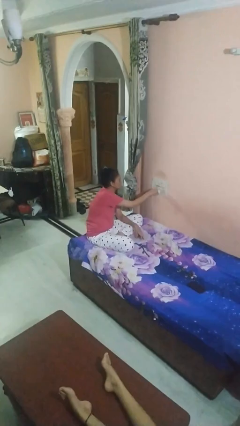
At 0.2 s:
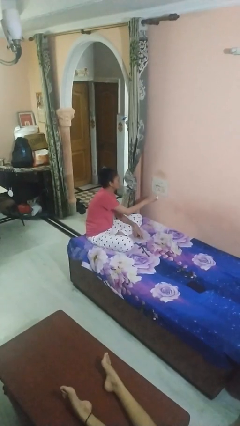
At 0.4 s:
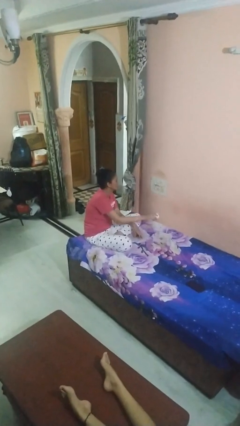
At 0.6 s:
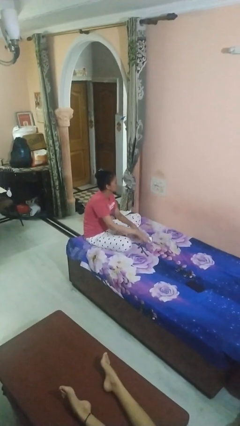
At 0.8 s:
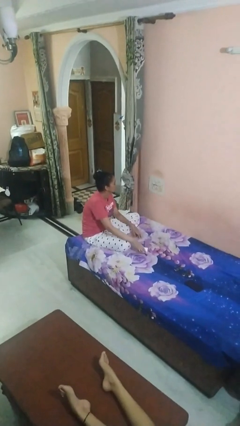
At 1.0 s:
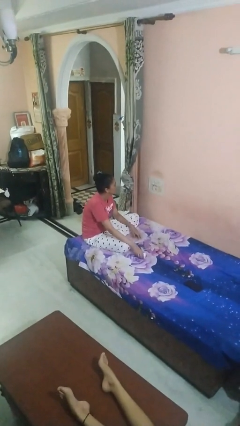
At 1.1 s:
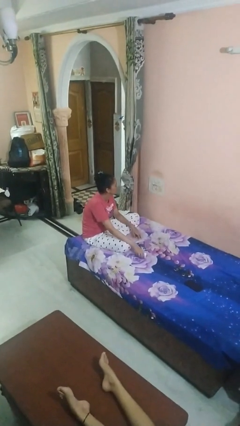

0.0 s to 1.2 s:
person unplugs from electrical socket

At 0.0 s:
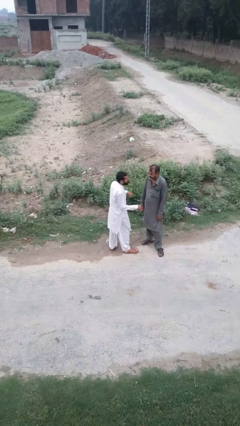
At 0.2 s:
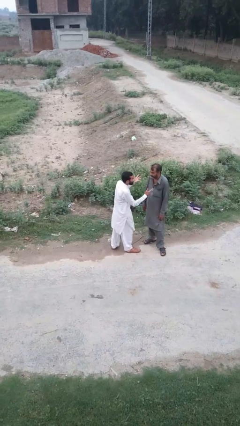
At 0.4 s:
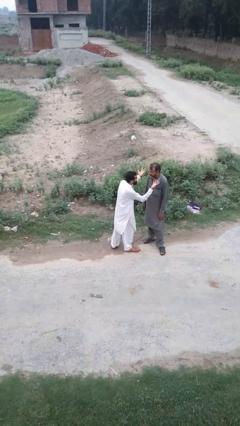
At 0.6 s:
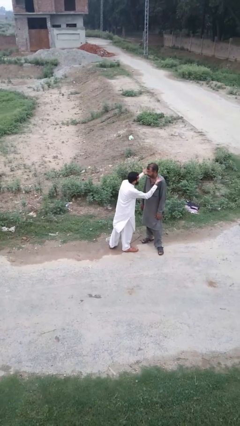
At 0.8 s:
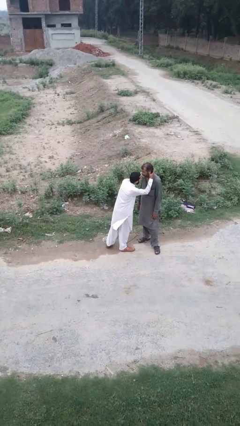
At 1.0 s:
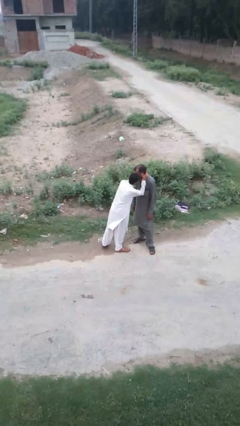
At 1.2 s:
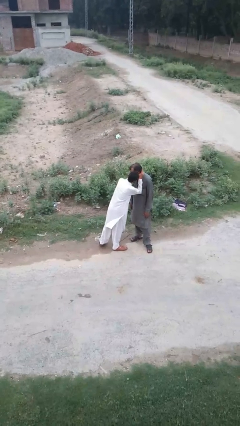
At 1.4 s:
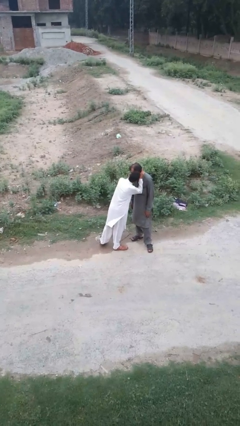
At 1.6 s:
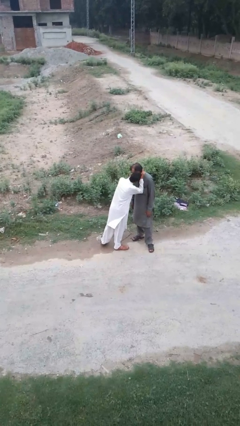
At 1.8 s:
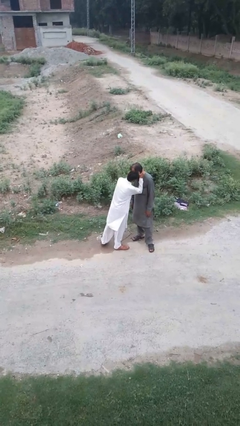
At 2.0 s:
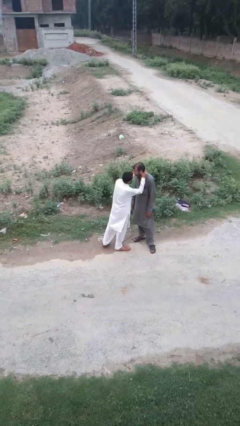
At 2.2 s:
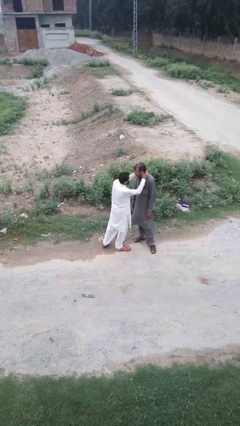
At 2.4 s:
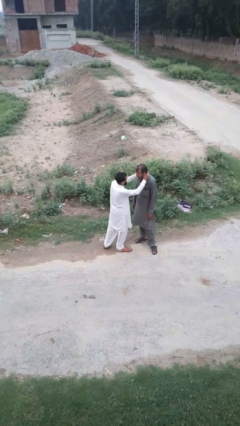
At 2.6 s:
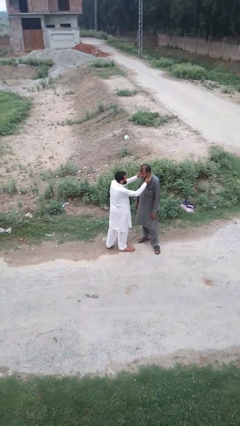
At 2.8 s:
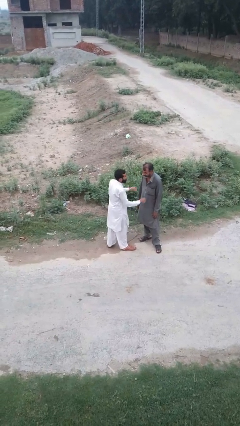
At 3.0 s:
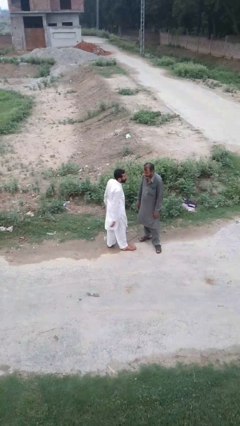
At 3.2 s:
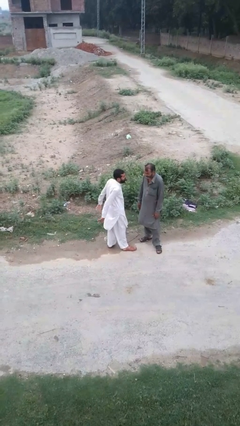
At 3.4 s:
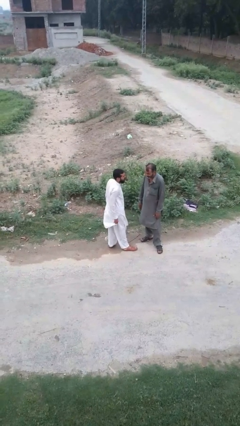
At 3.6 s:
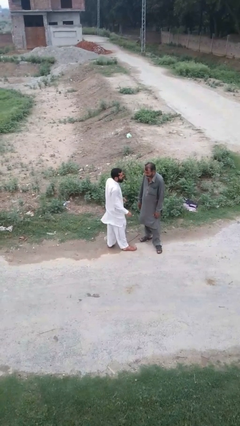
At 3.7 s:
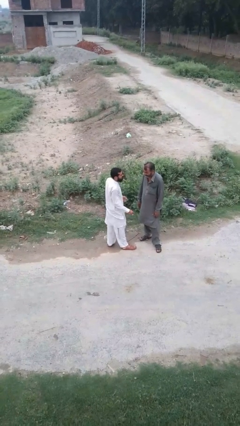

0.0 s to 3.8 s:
person kisses cheek of person

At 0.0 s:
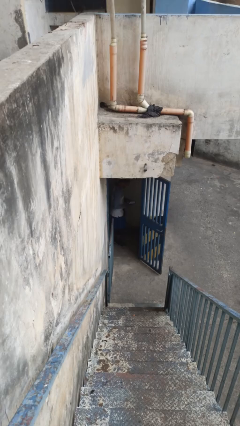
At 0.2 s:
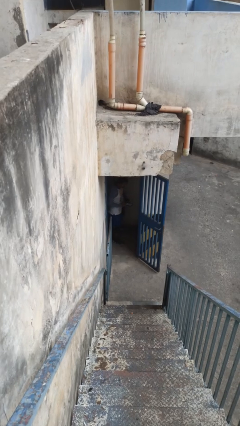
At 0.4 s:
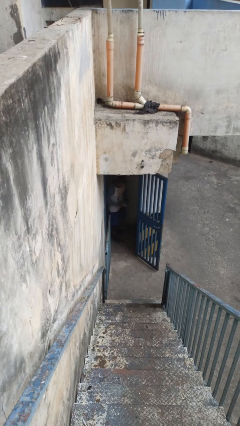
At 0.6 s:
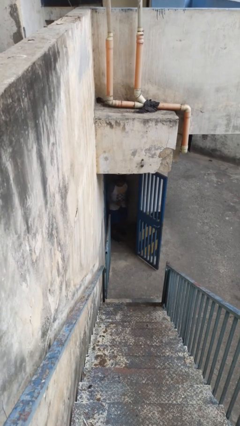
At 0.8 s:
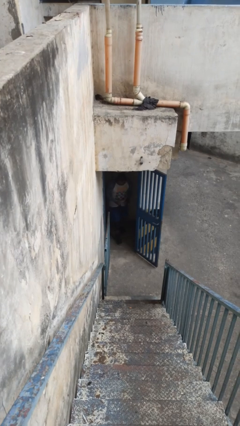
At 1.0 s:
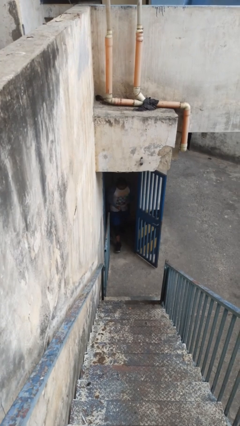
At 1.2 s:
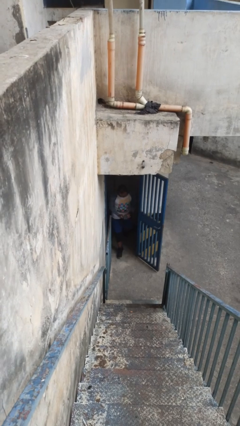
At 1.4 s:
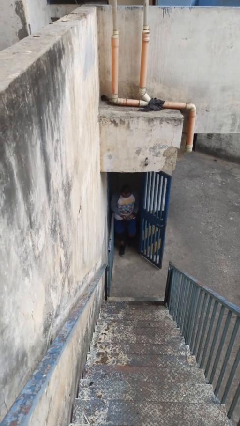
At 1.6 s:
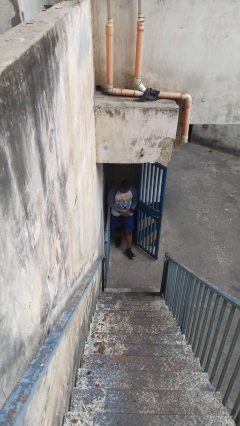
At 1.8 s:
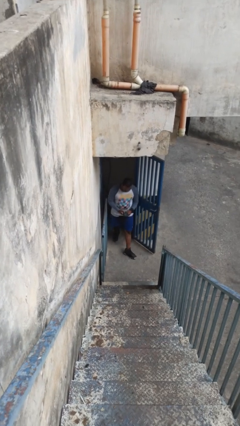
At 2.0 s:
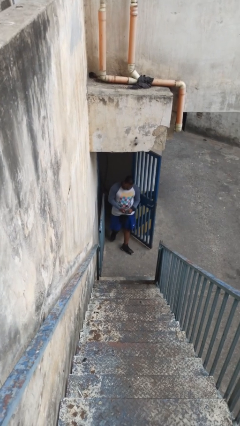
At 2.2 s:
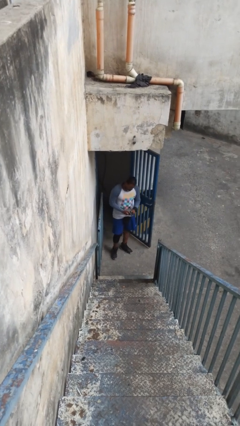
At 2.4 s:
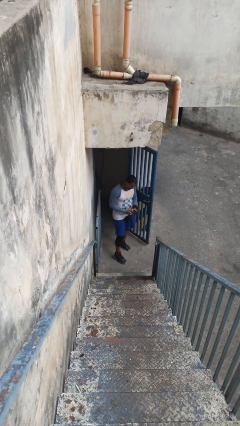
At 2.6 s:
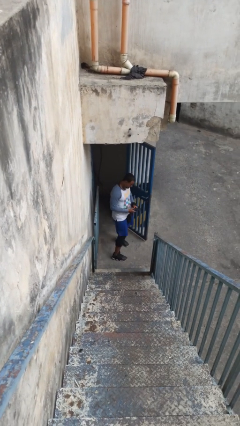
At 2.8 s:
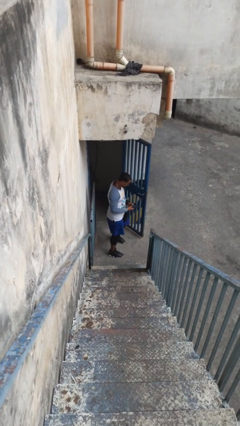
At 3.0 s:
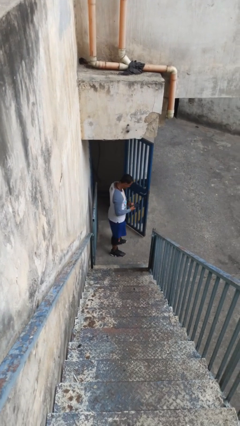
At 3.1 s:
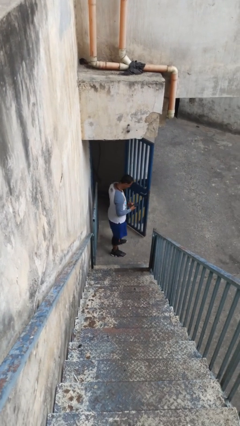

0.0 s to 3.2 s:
person enters scene through structure

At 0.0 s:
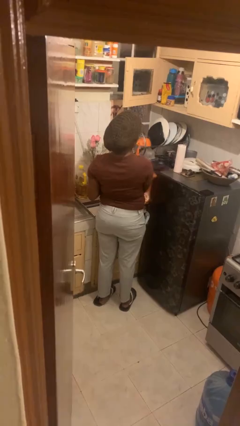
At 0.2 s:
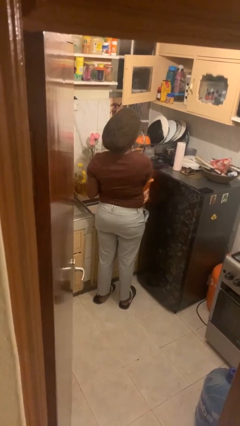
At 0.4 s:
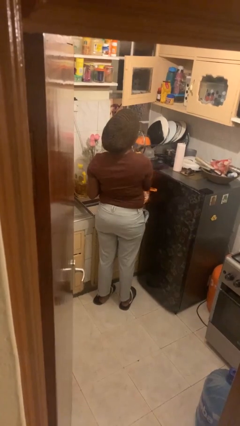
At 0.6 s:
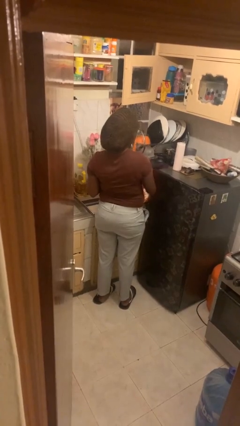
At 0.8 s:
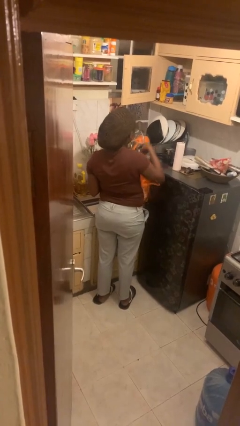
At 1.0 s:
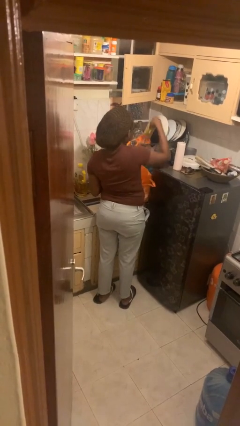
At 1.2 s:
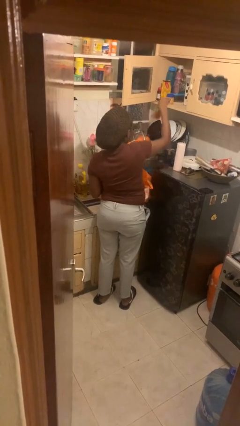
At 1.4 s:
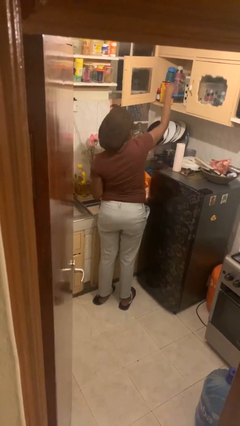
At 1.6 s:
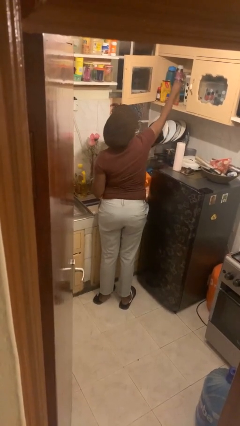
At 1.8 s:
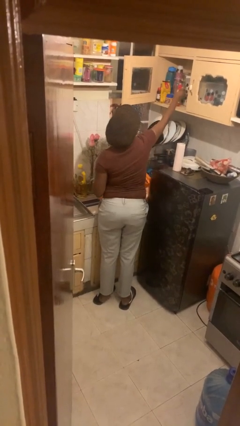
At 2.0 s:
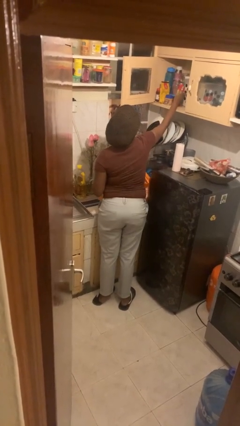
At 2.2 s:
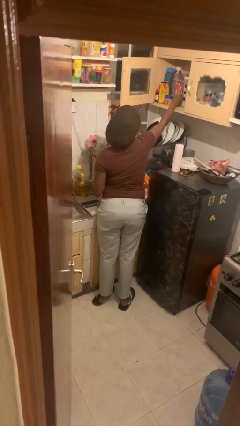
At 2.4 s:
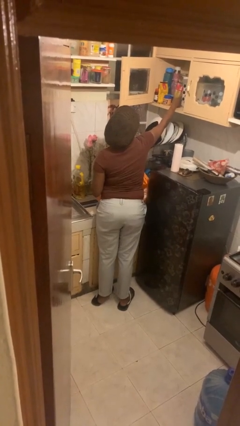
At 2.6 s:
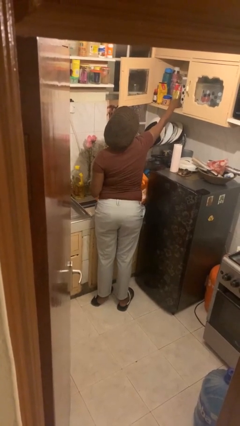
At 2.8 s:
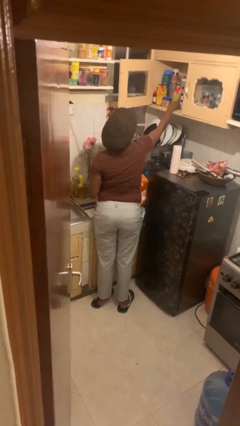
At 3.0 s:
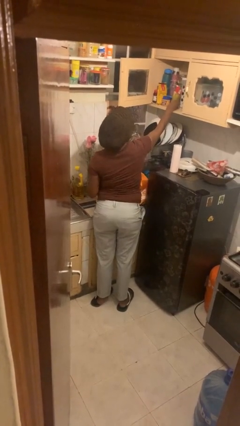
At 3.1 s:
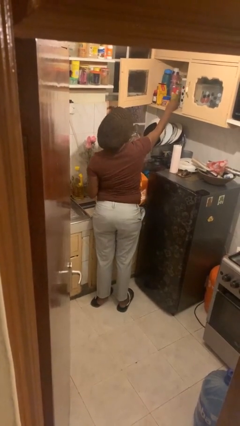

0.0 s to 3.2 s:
person loads groceries into cabinet

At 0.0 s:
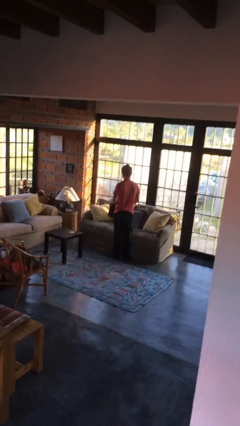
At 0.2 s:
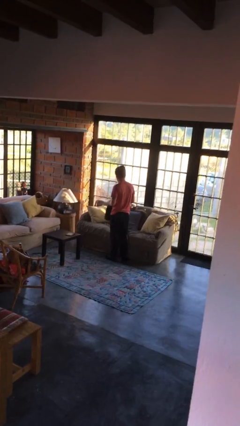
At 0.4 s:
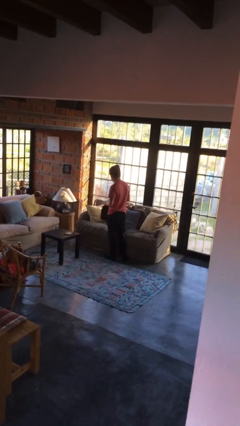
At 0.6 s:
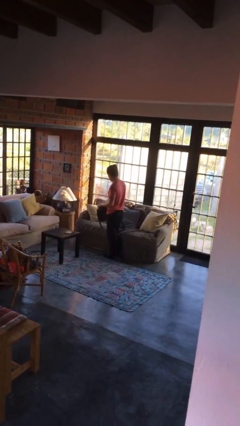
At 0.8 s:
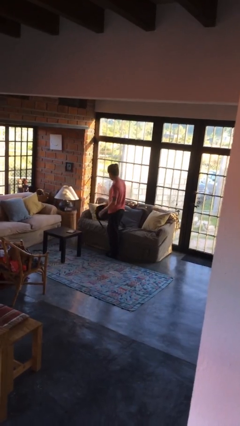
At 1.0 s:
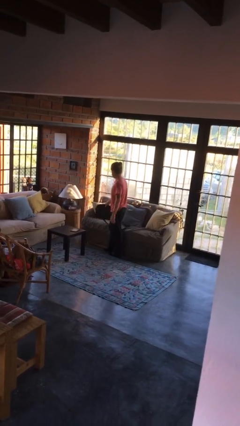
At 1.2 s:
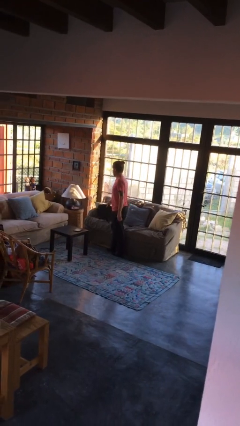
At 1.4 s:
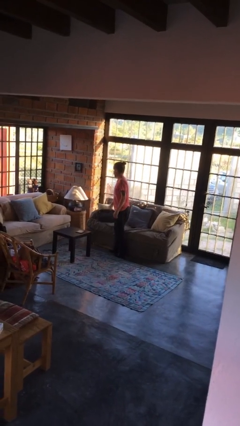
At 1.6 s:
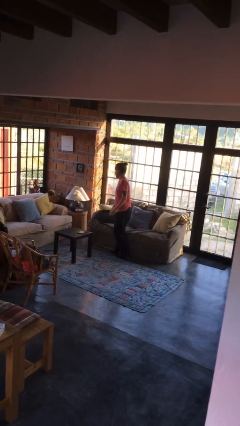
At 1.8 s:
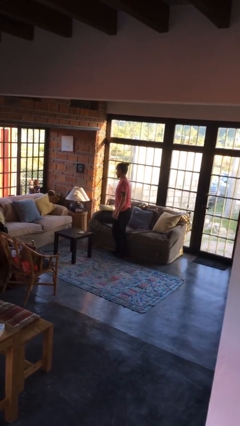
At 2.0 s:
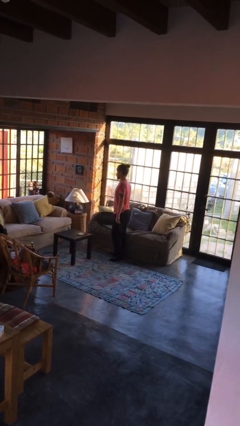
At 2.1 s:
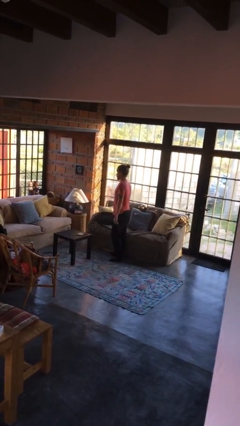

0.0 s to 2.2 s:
person puts down object on couch

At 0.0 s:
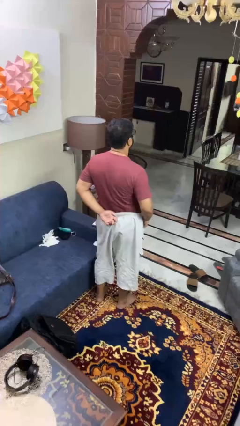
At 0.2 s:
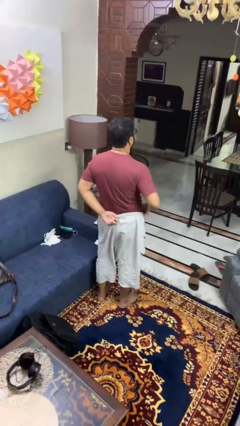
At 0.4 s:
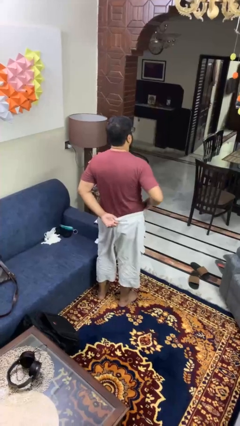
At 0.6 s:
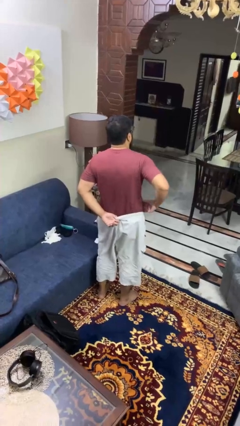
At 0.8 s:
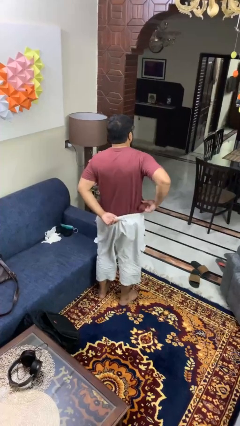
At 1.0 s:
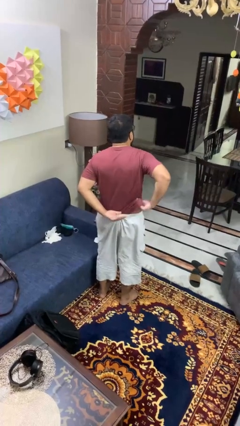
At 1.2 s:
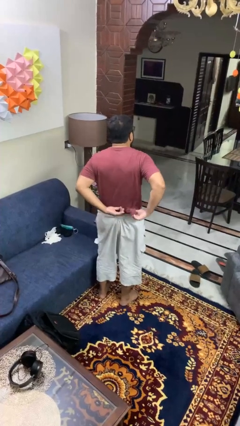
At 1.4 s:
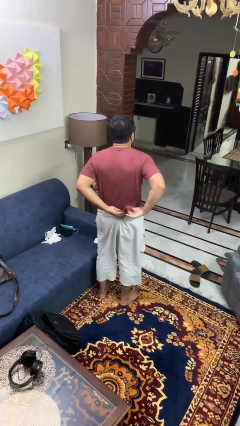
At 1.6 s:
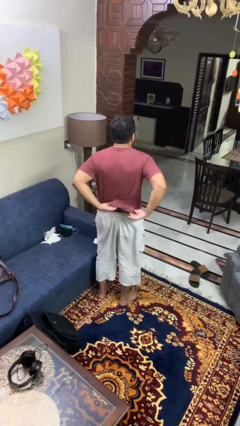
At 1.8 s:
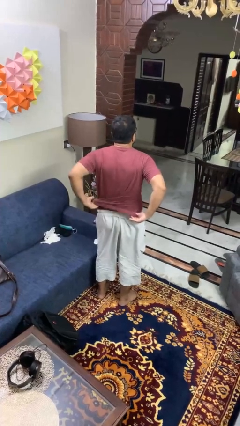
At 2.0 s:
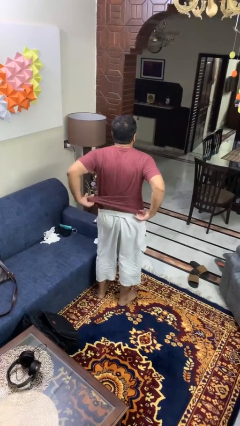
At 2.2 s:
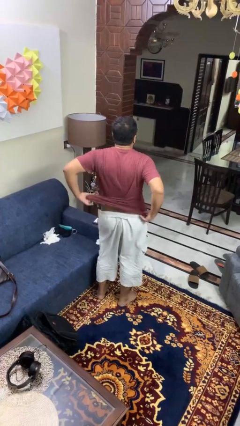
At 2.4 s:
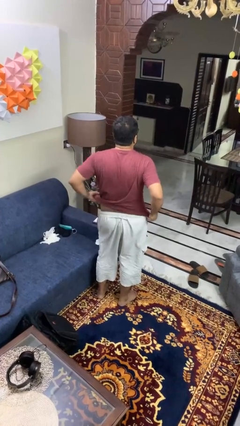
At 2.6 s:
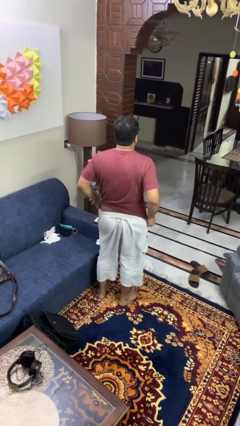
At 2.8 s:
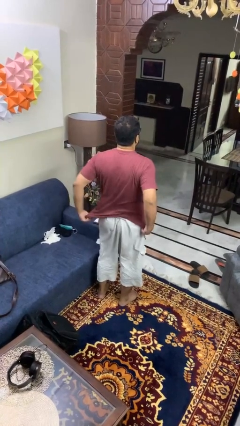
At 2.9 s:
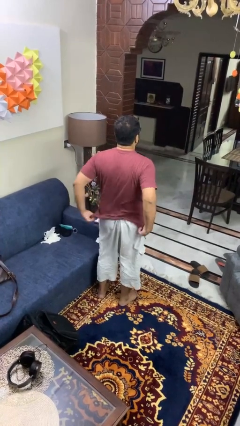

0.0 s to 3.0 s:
person untucks shirt

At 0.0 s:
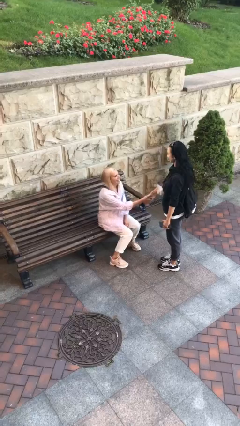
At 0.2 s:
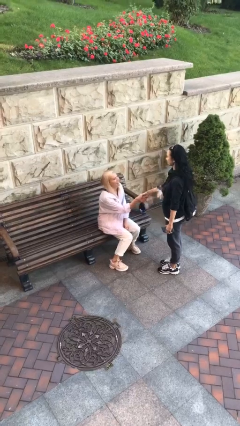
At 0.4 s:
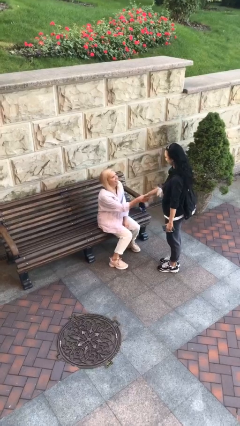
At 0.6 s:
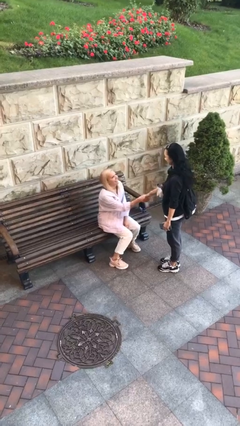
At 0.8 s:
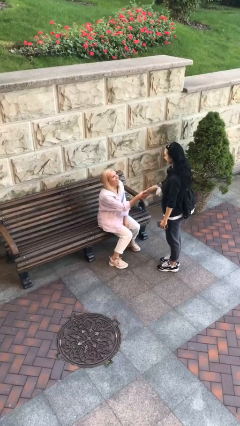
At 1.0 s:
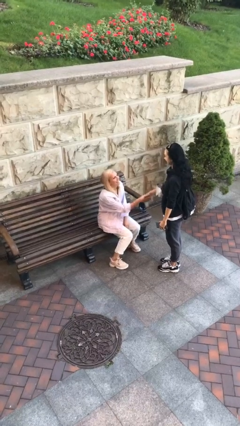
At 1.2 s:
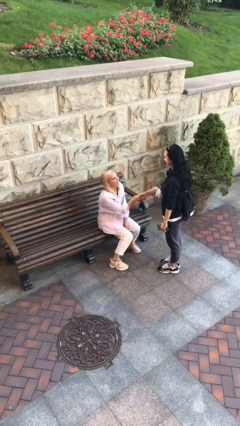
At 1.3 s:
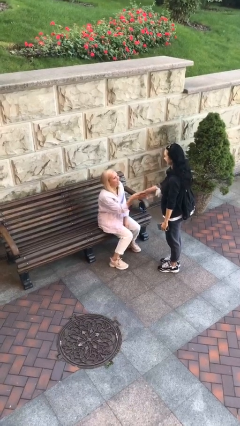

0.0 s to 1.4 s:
person shakes hand
